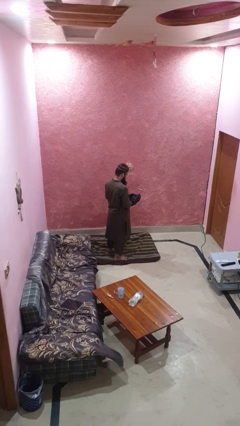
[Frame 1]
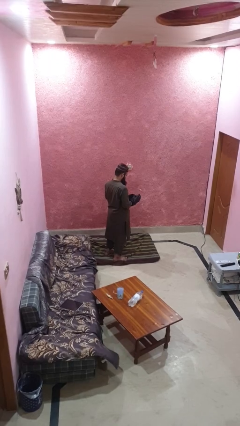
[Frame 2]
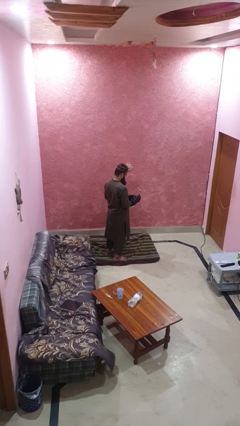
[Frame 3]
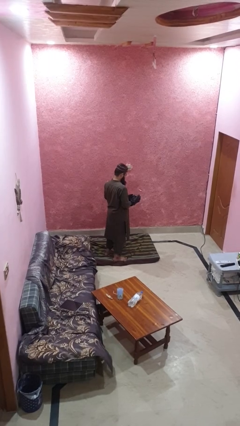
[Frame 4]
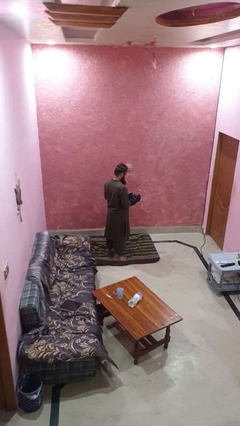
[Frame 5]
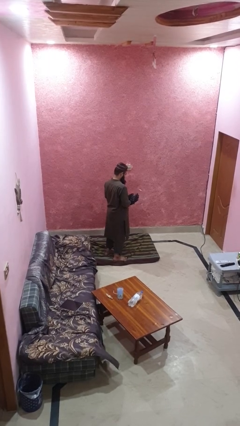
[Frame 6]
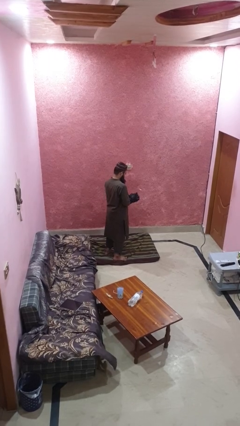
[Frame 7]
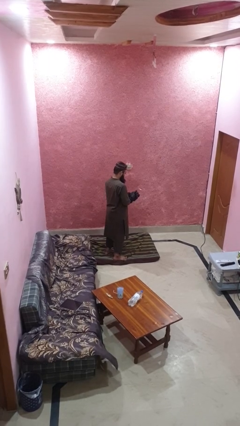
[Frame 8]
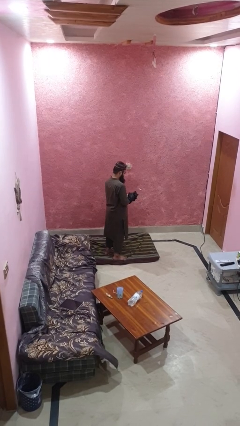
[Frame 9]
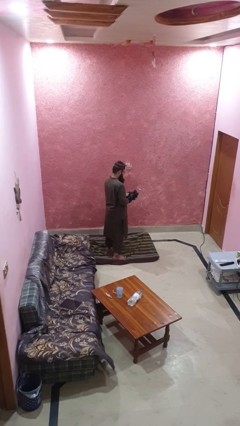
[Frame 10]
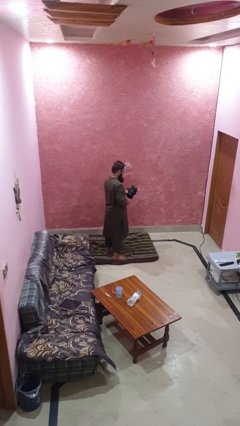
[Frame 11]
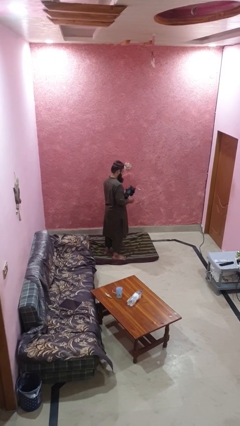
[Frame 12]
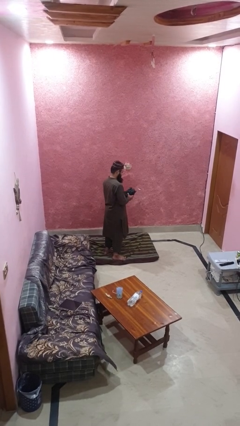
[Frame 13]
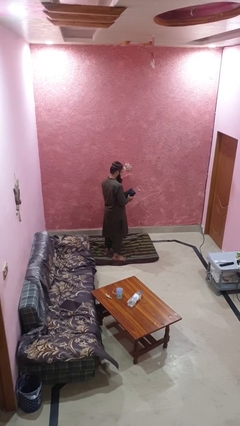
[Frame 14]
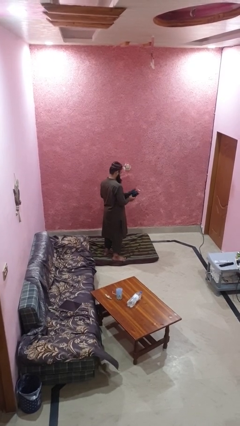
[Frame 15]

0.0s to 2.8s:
person takes off gloves

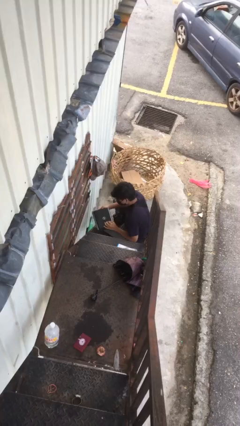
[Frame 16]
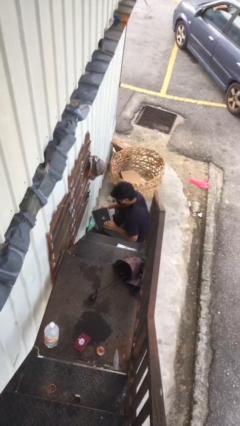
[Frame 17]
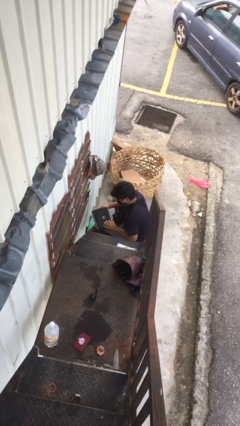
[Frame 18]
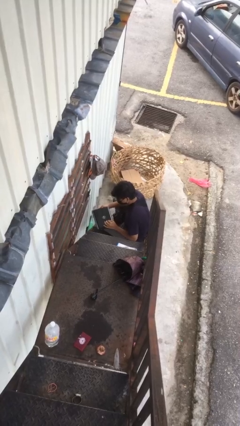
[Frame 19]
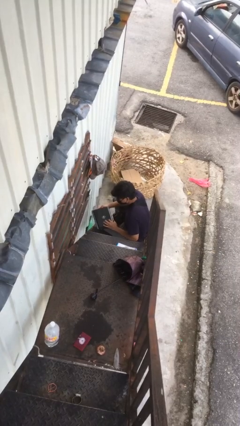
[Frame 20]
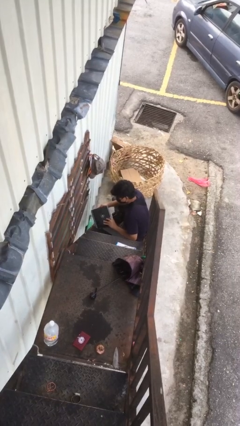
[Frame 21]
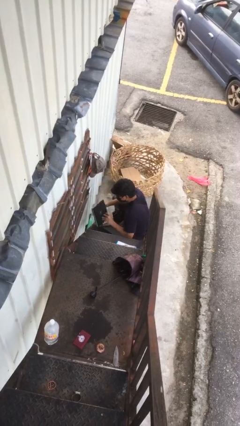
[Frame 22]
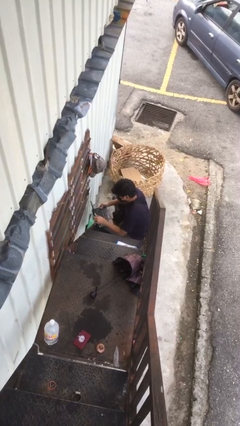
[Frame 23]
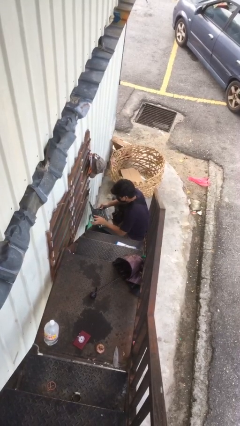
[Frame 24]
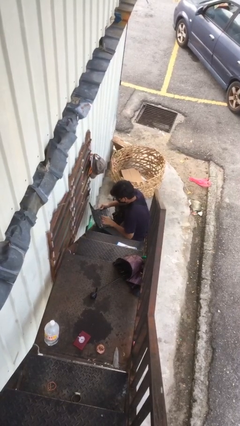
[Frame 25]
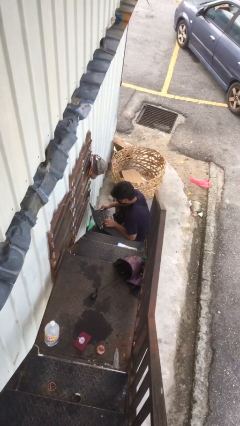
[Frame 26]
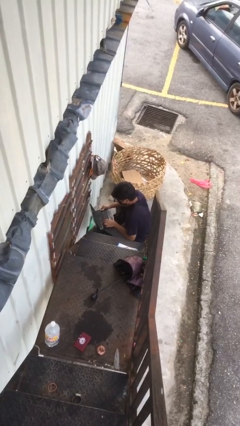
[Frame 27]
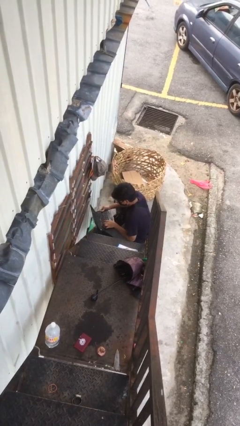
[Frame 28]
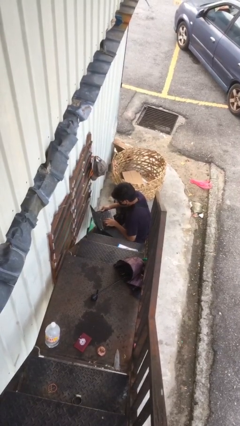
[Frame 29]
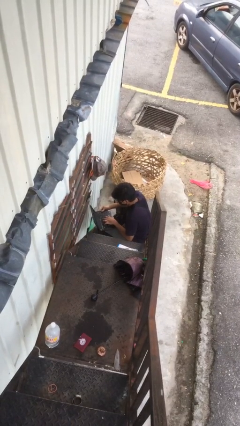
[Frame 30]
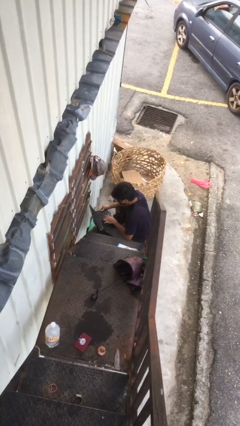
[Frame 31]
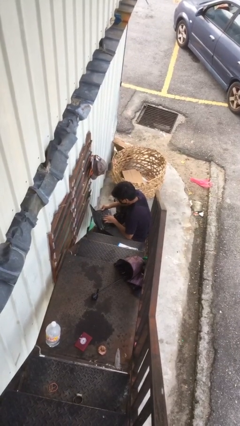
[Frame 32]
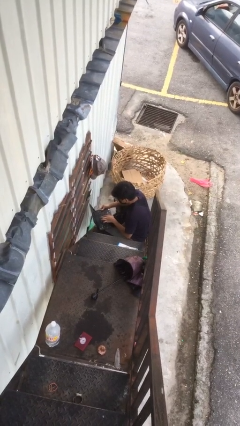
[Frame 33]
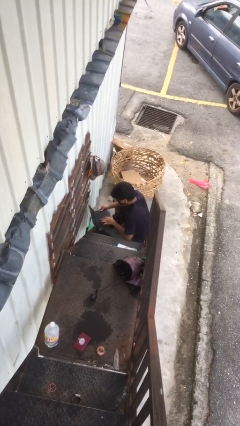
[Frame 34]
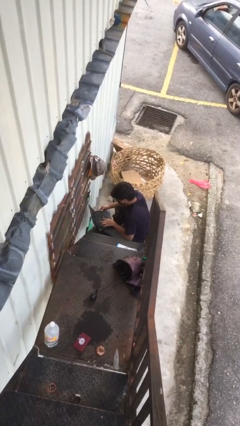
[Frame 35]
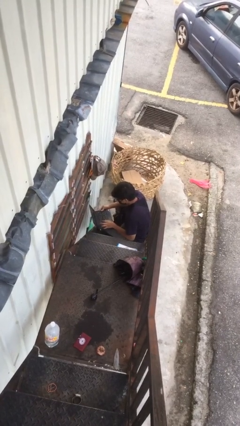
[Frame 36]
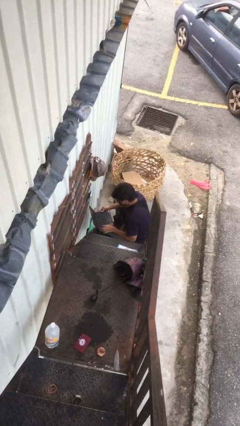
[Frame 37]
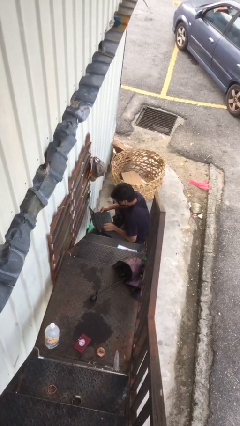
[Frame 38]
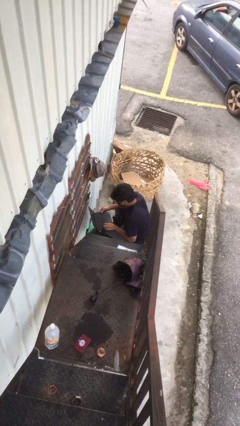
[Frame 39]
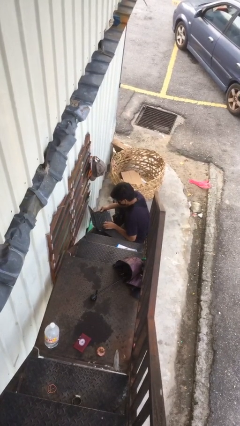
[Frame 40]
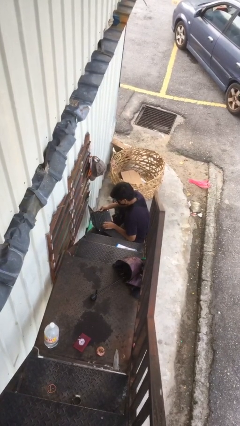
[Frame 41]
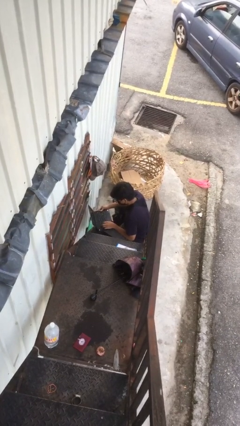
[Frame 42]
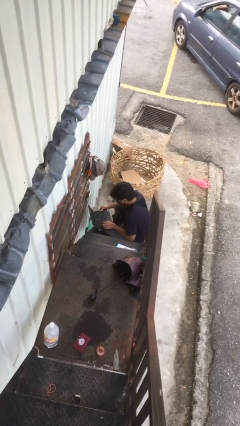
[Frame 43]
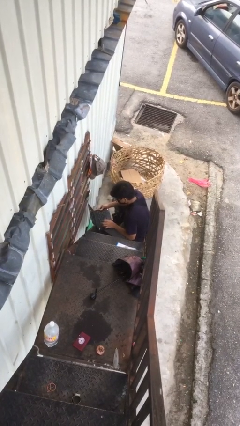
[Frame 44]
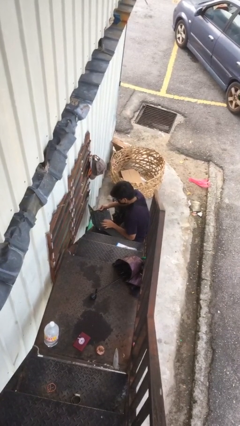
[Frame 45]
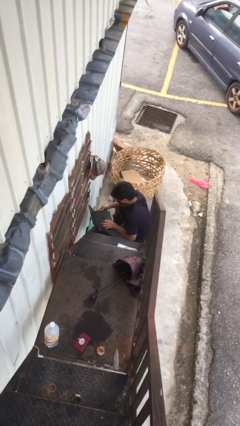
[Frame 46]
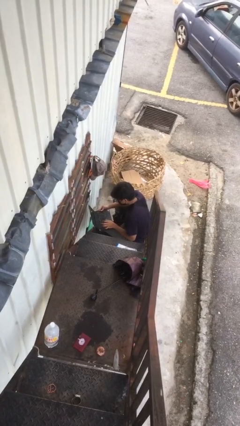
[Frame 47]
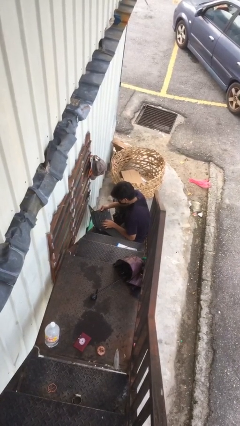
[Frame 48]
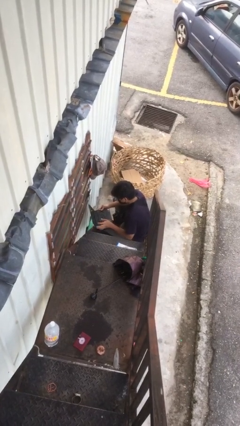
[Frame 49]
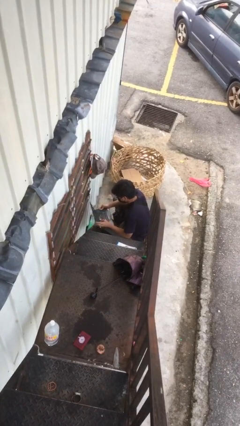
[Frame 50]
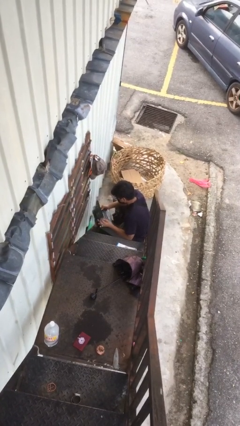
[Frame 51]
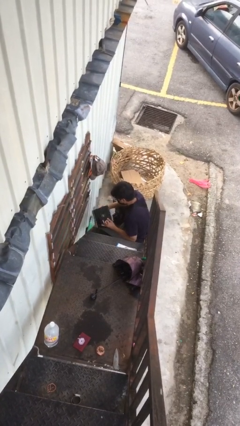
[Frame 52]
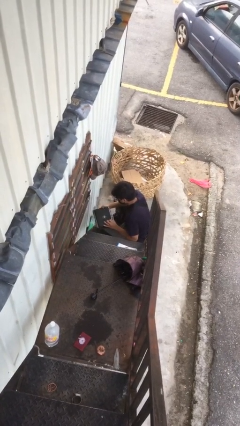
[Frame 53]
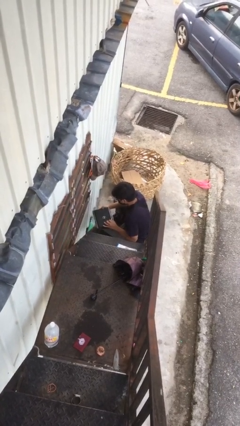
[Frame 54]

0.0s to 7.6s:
person interacts with laptop

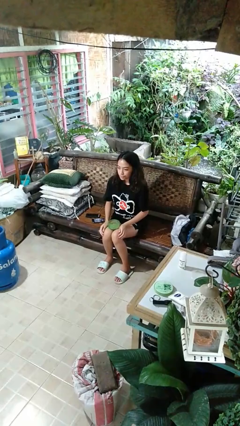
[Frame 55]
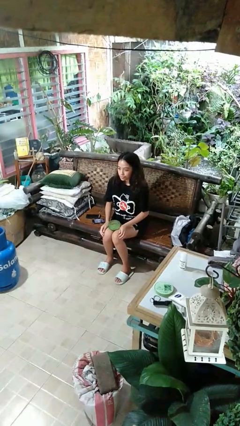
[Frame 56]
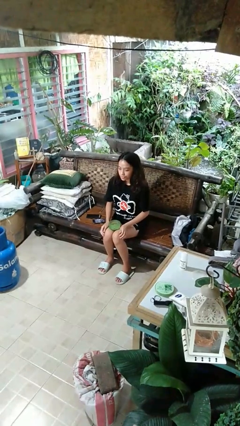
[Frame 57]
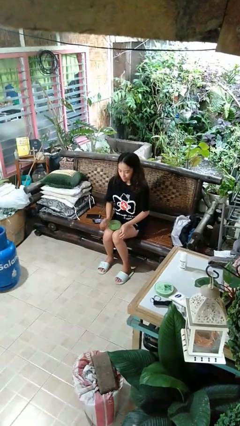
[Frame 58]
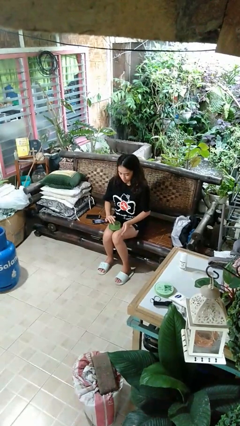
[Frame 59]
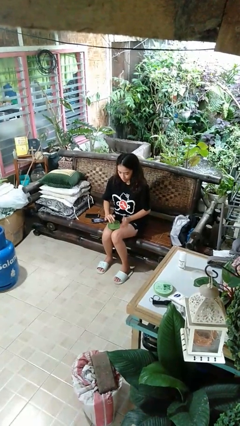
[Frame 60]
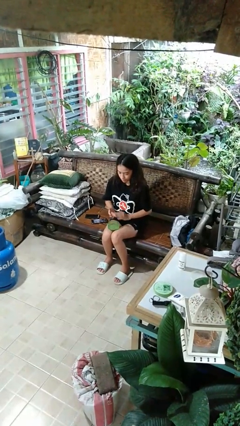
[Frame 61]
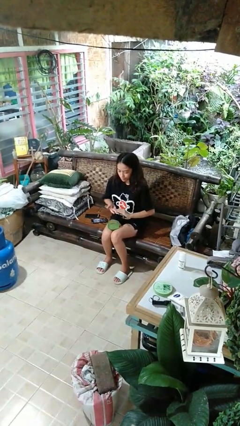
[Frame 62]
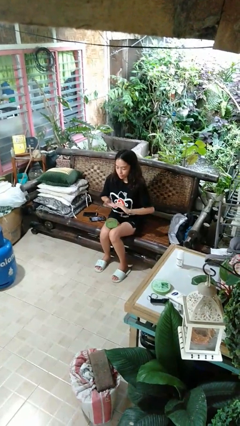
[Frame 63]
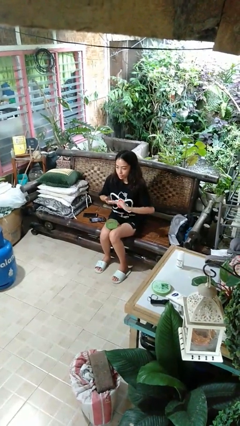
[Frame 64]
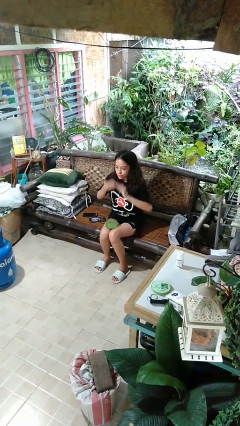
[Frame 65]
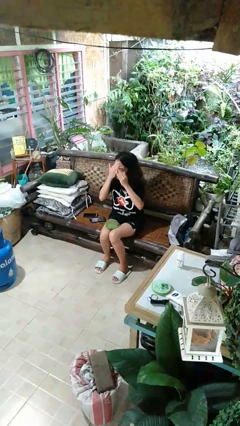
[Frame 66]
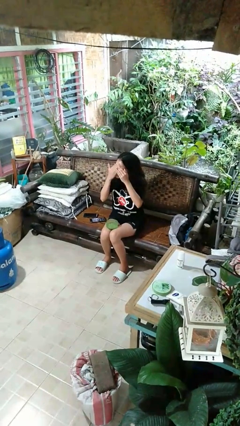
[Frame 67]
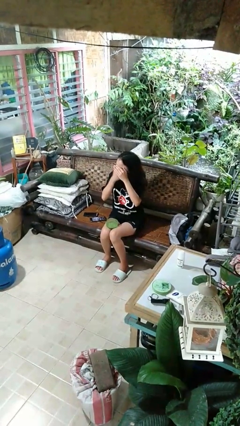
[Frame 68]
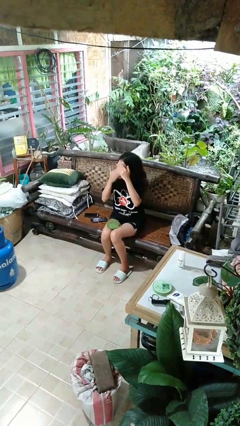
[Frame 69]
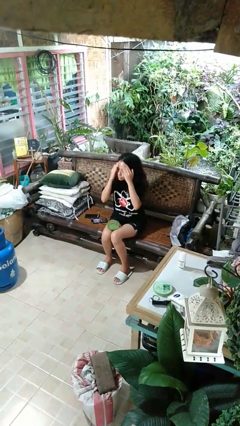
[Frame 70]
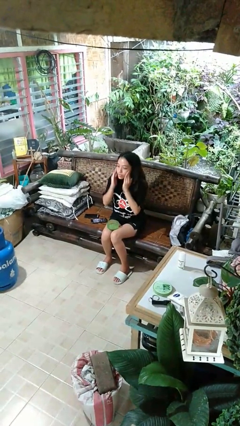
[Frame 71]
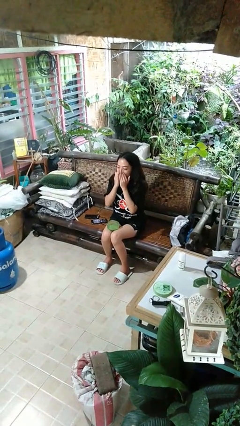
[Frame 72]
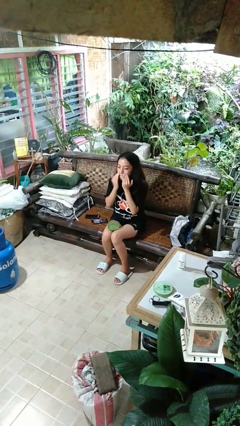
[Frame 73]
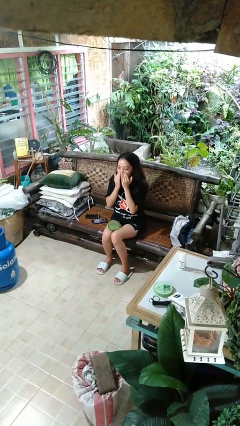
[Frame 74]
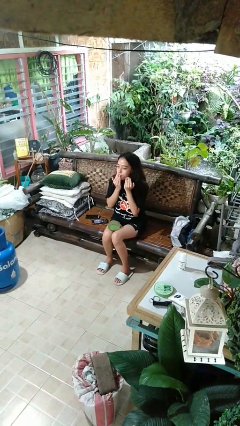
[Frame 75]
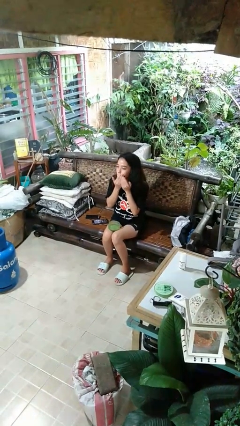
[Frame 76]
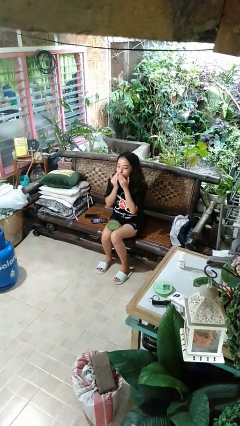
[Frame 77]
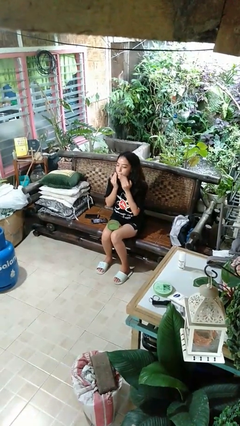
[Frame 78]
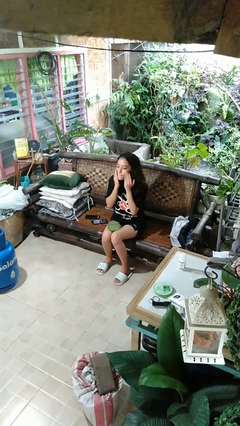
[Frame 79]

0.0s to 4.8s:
person applies facial moisturizer

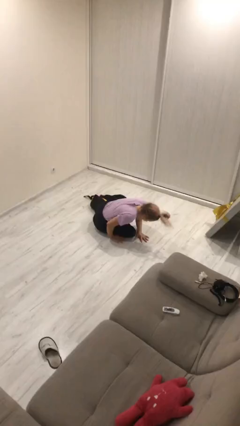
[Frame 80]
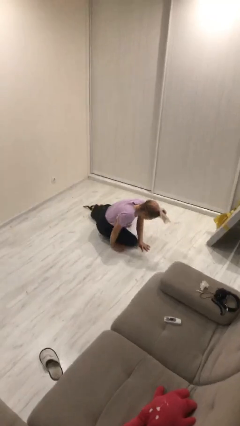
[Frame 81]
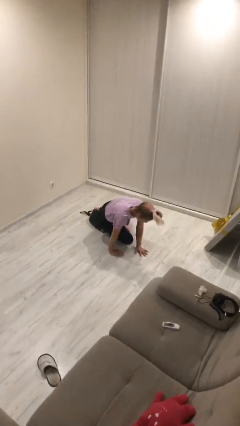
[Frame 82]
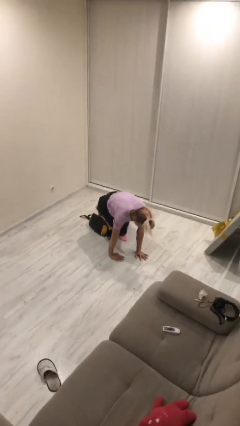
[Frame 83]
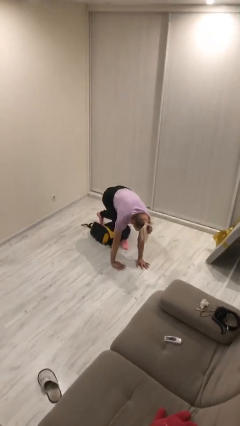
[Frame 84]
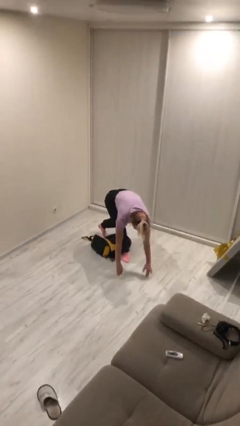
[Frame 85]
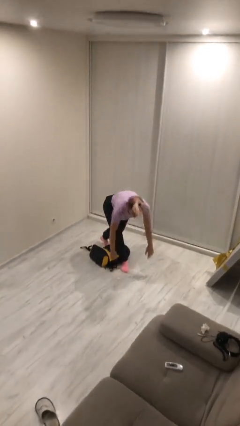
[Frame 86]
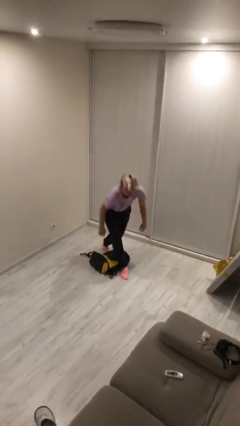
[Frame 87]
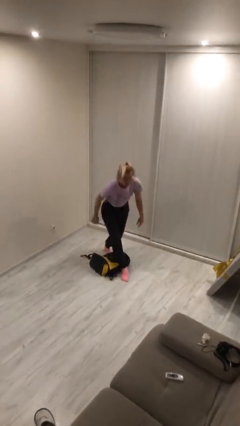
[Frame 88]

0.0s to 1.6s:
person stands up from floor

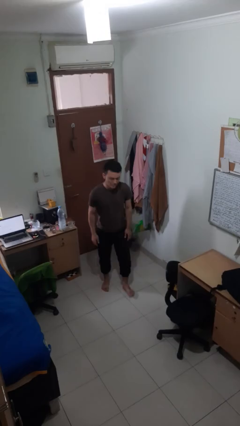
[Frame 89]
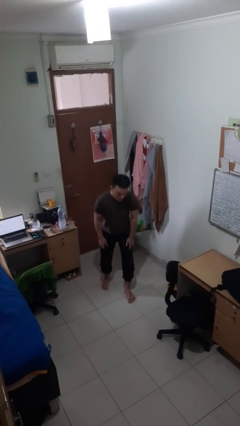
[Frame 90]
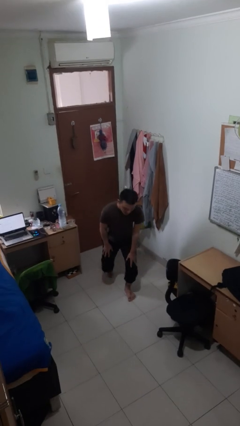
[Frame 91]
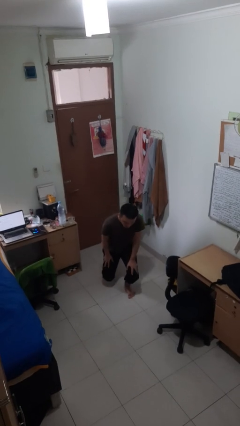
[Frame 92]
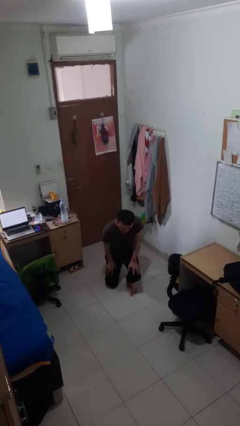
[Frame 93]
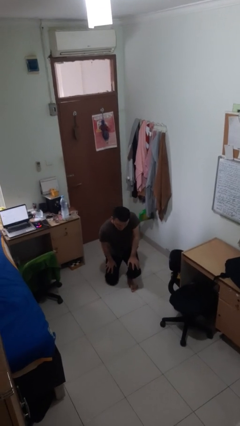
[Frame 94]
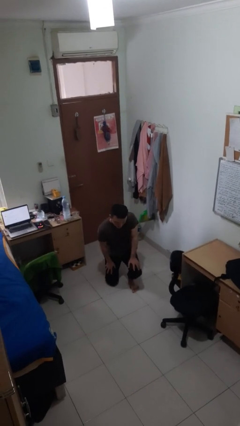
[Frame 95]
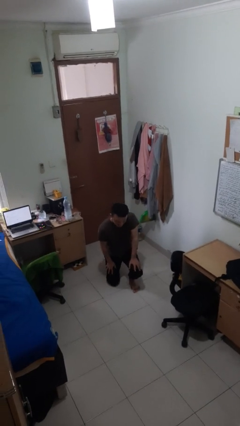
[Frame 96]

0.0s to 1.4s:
person kneels
